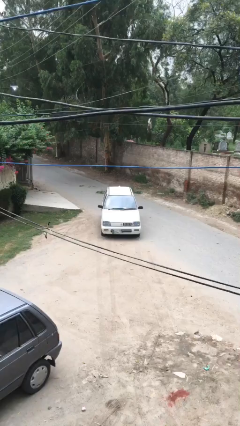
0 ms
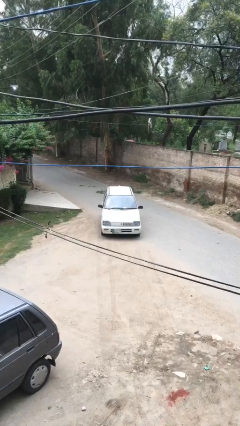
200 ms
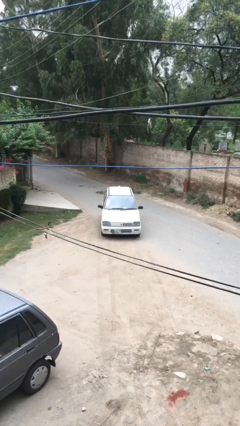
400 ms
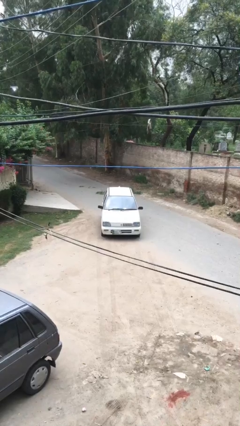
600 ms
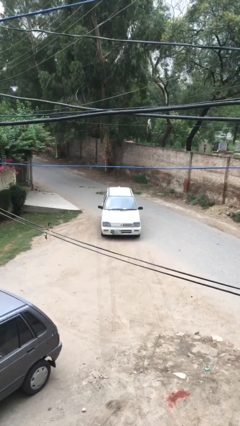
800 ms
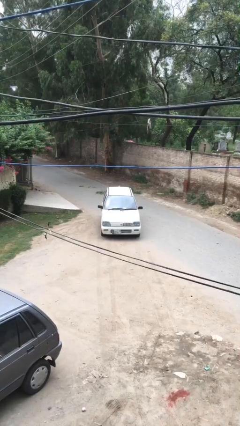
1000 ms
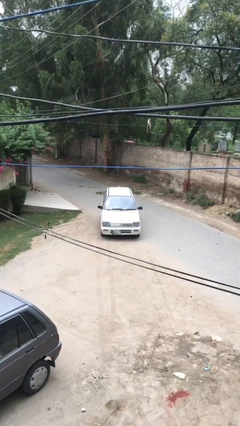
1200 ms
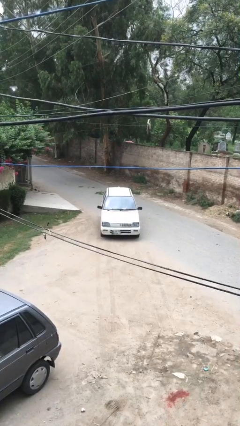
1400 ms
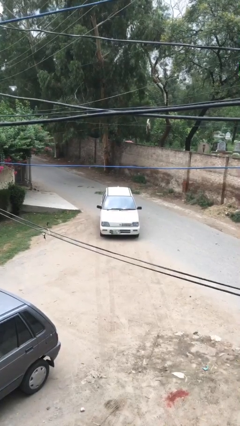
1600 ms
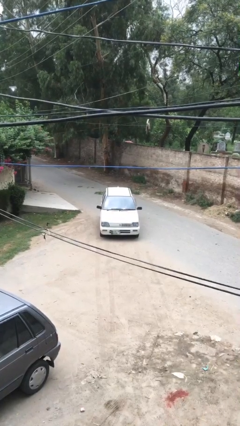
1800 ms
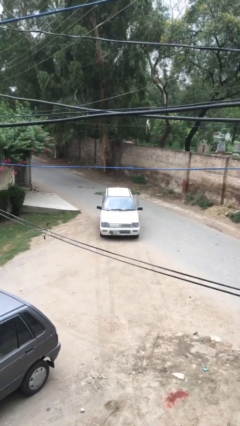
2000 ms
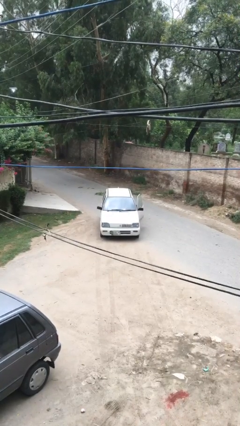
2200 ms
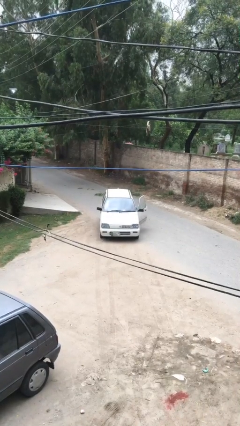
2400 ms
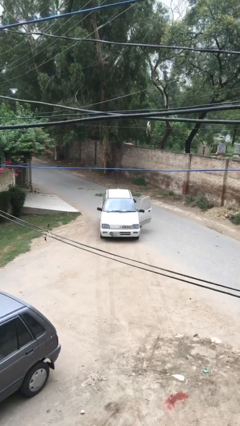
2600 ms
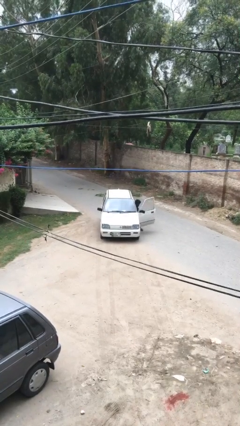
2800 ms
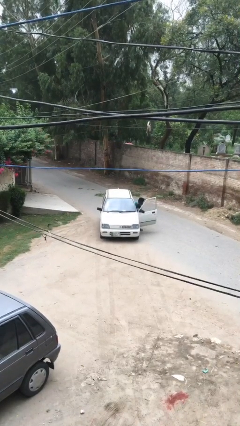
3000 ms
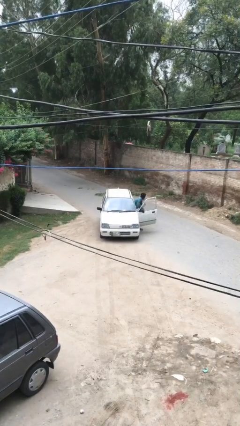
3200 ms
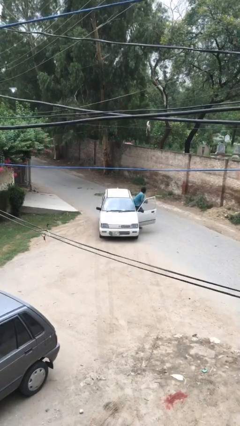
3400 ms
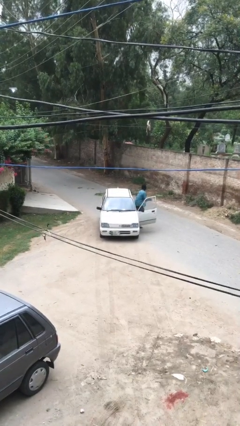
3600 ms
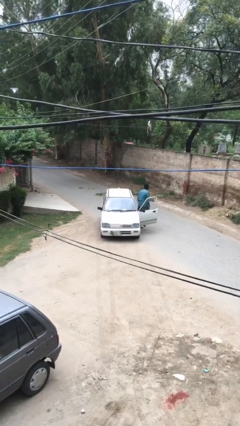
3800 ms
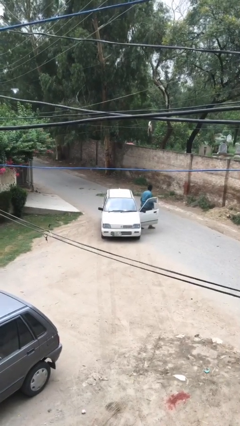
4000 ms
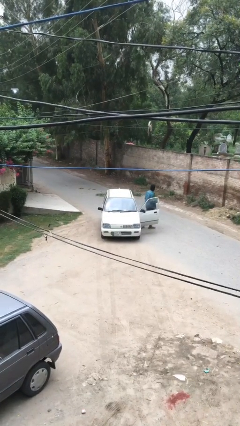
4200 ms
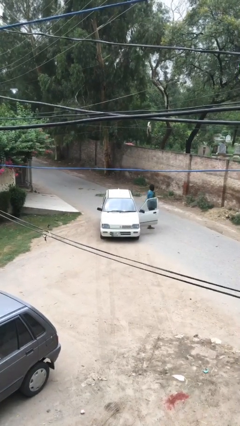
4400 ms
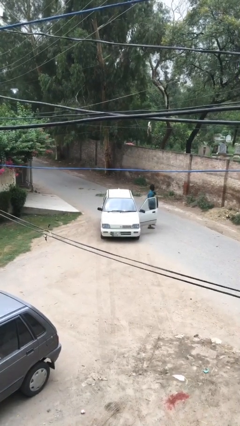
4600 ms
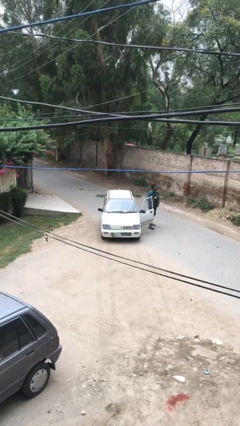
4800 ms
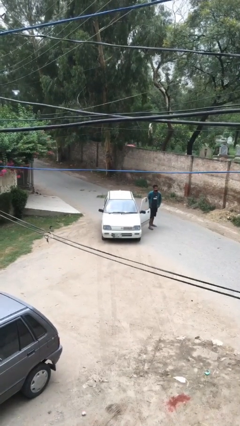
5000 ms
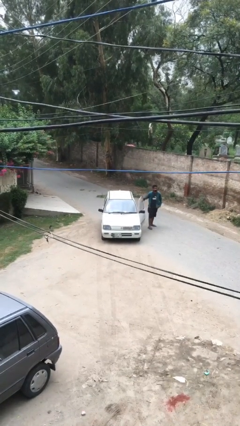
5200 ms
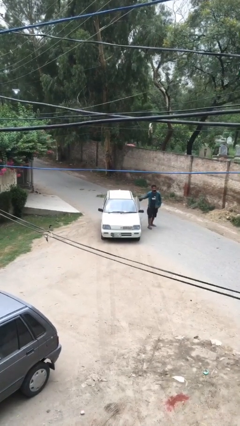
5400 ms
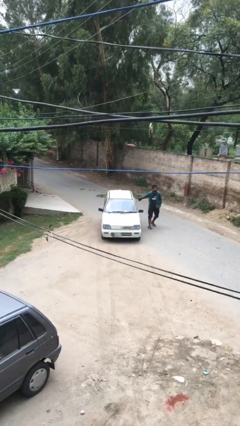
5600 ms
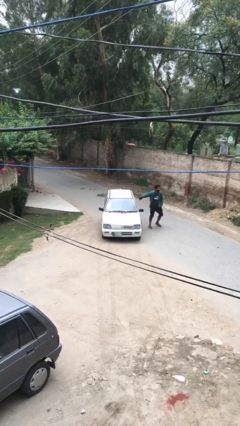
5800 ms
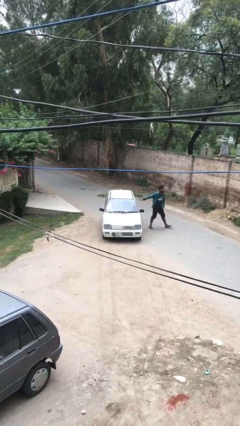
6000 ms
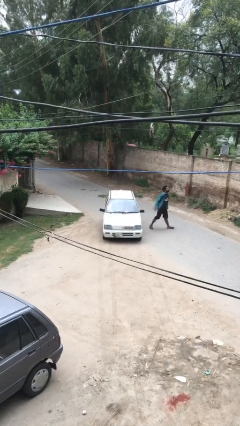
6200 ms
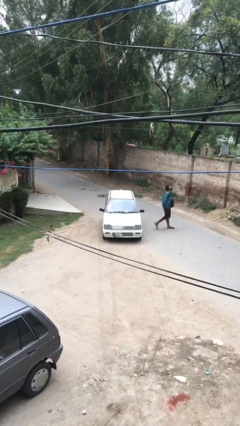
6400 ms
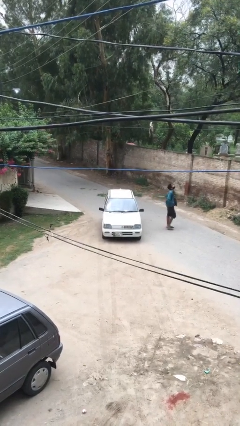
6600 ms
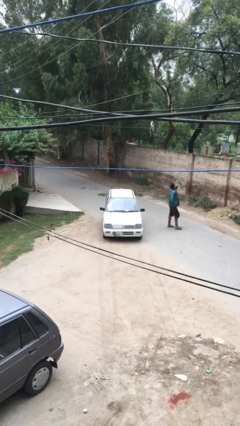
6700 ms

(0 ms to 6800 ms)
car drops off person

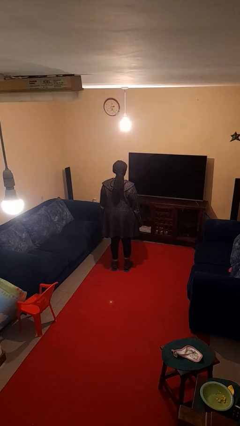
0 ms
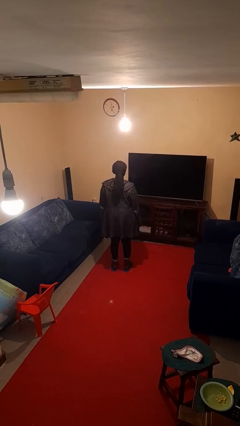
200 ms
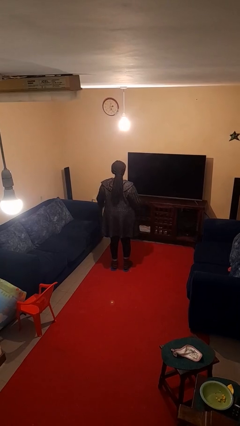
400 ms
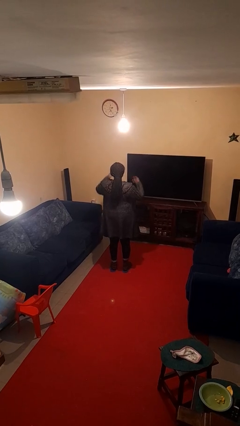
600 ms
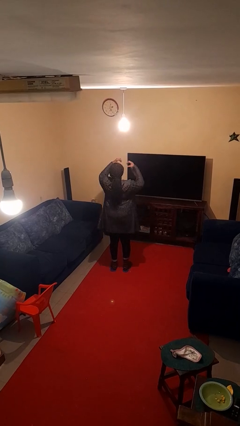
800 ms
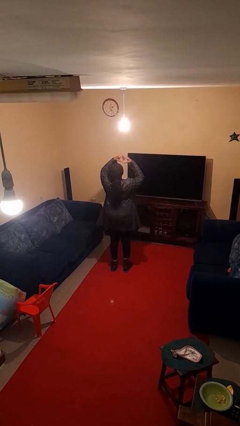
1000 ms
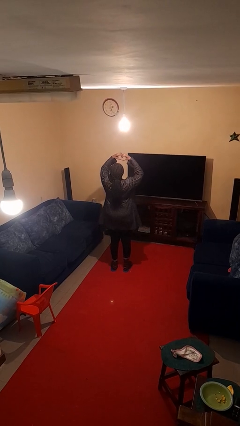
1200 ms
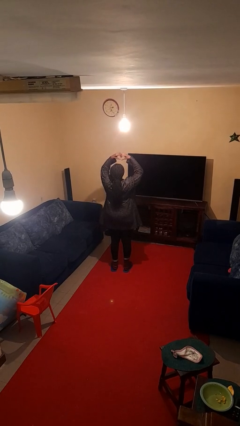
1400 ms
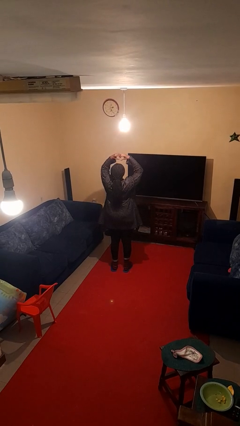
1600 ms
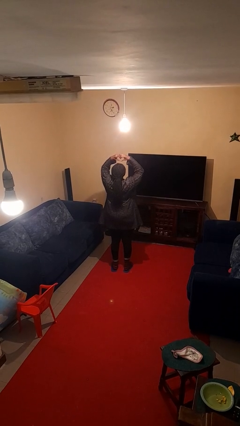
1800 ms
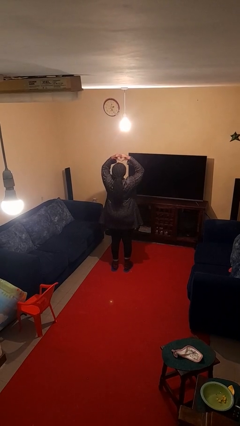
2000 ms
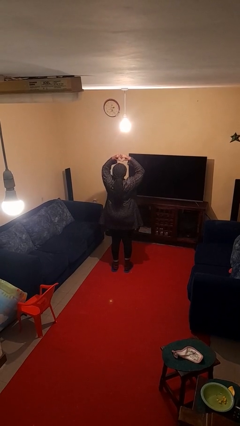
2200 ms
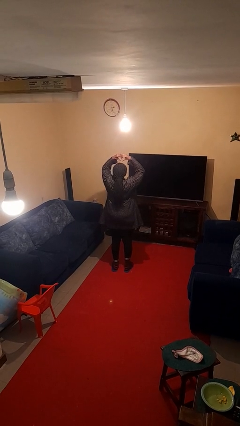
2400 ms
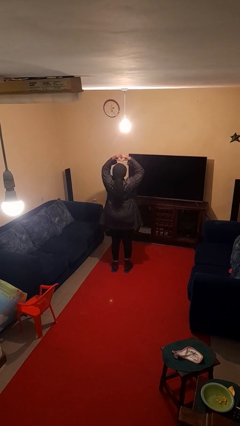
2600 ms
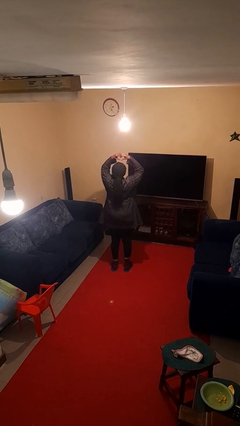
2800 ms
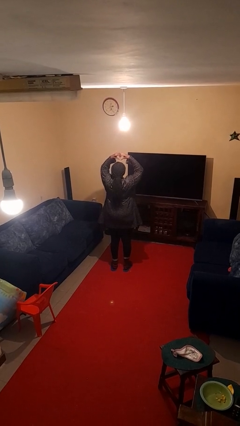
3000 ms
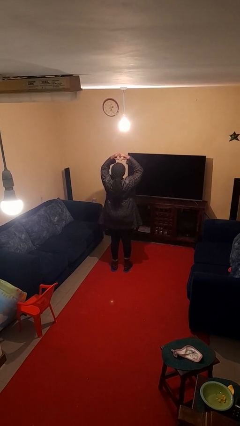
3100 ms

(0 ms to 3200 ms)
person gestures heart

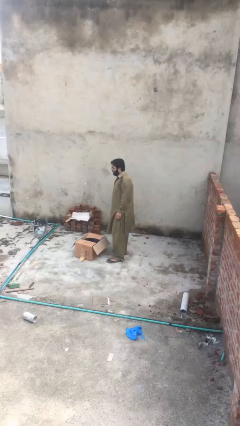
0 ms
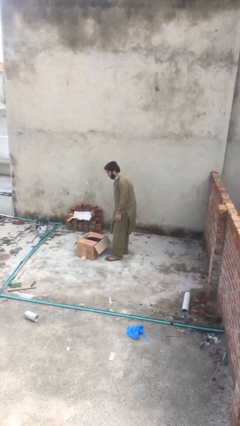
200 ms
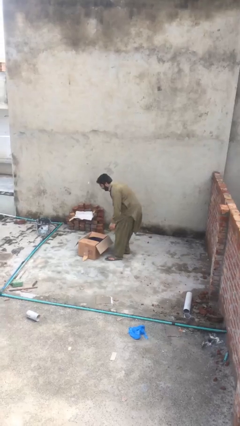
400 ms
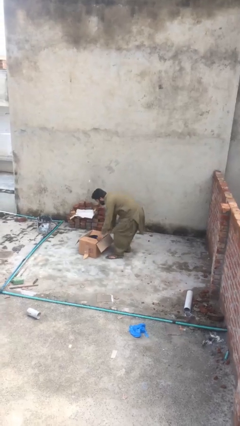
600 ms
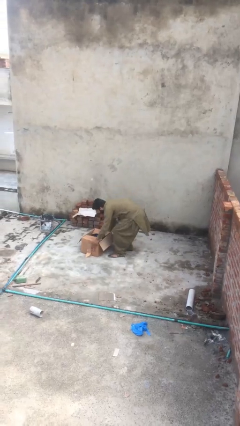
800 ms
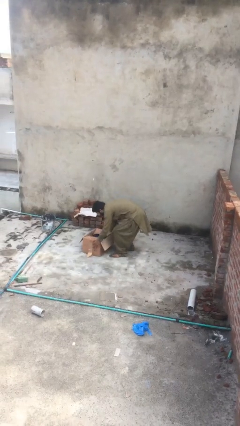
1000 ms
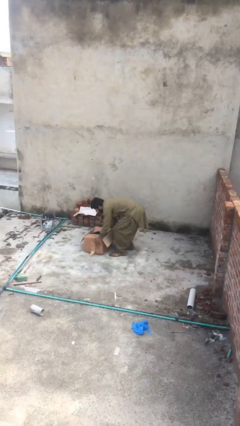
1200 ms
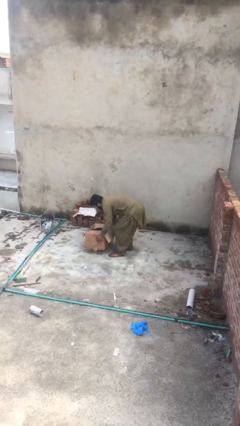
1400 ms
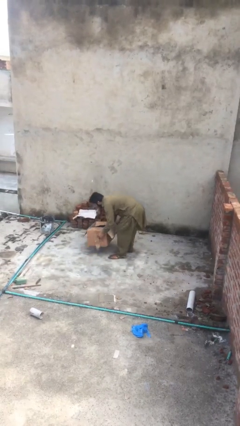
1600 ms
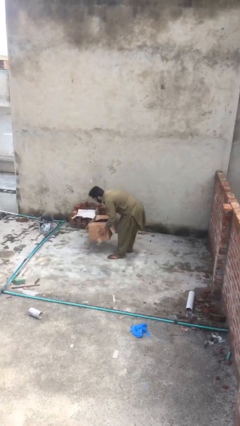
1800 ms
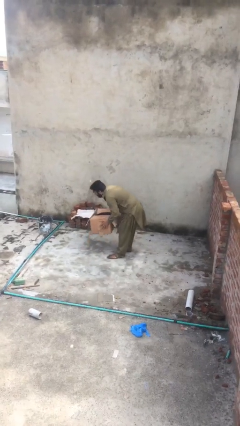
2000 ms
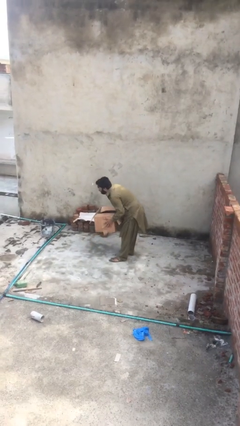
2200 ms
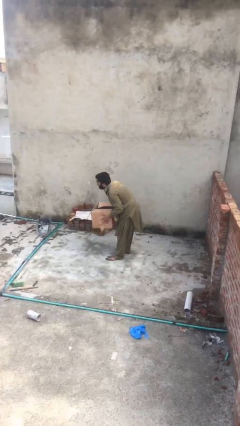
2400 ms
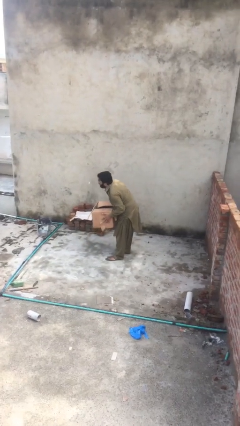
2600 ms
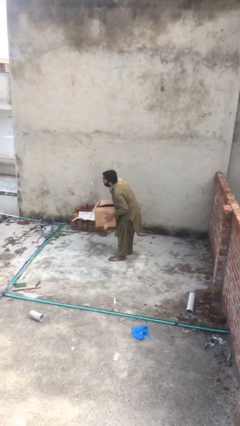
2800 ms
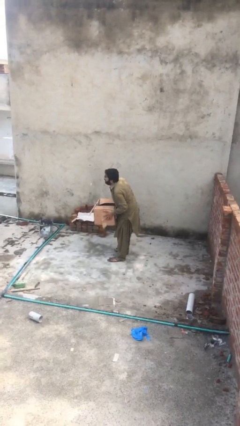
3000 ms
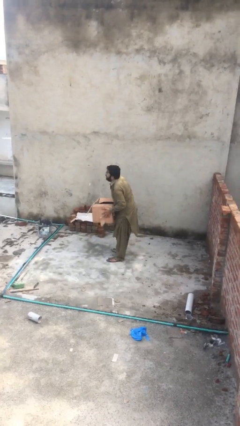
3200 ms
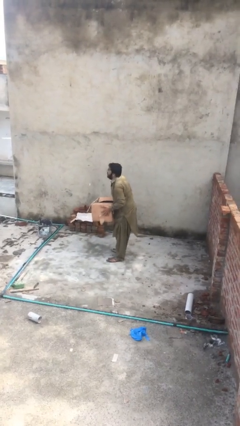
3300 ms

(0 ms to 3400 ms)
person picks up object from floor

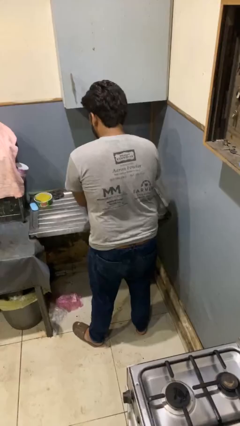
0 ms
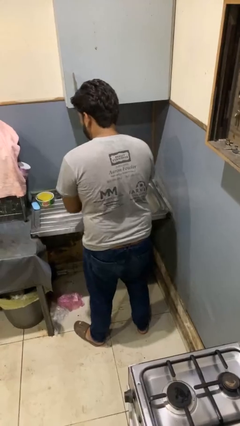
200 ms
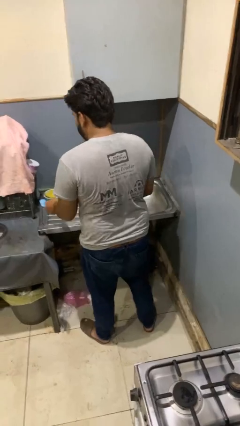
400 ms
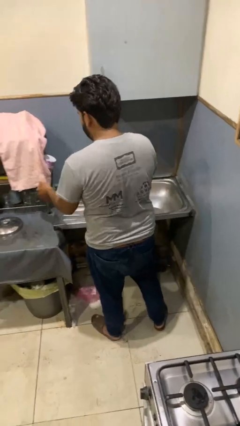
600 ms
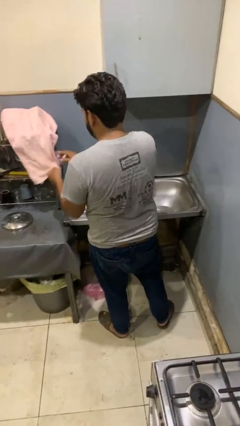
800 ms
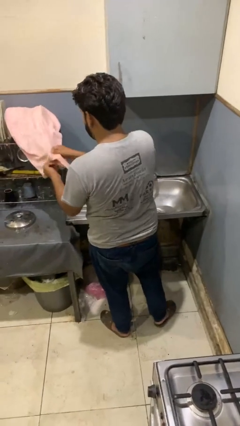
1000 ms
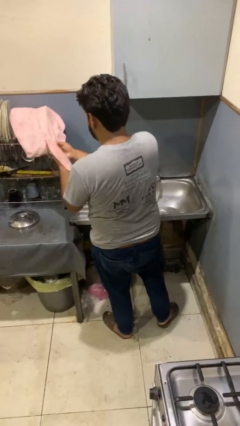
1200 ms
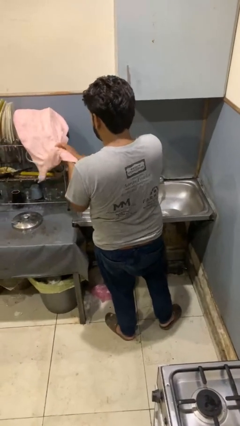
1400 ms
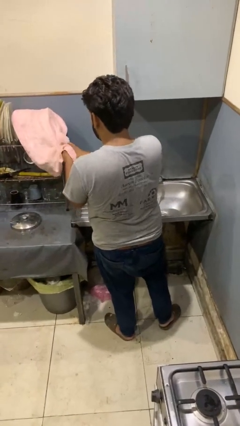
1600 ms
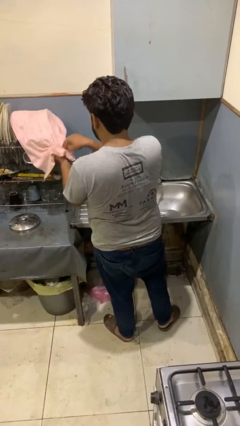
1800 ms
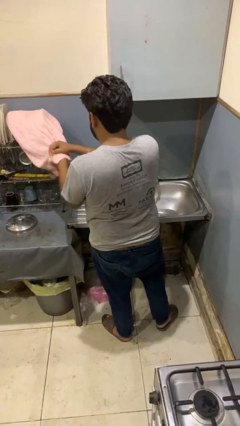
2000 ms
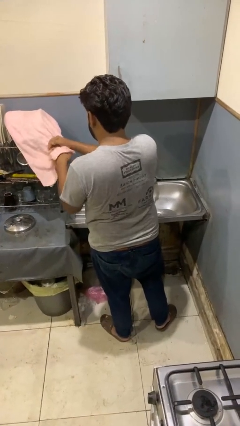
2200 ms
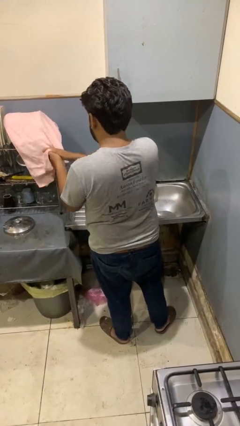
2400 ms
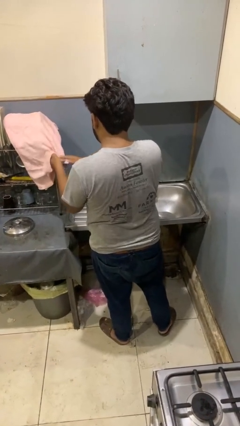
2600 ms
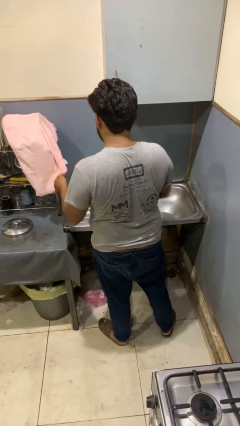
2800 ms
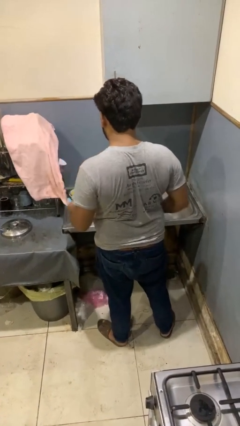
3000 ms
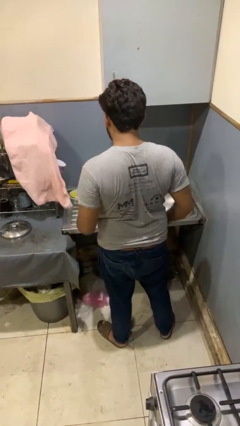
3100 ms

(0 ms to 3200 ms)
person dries hands with towel

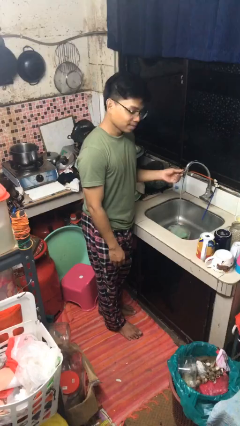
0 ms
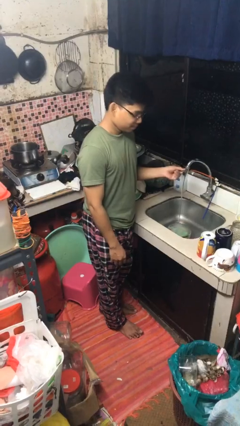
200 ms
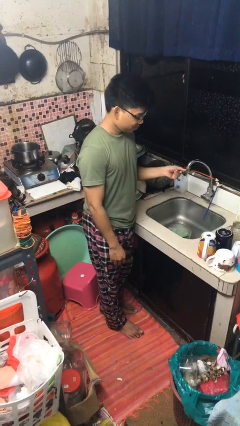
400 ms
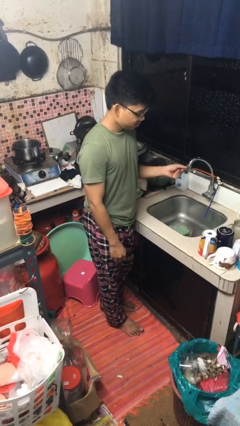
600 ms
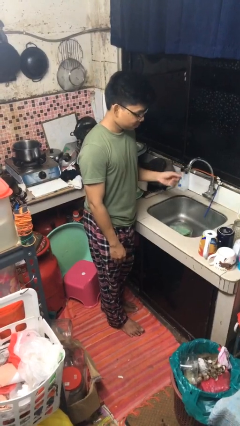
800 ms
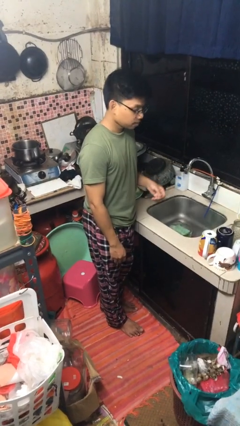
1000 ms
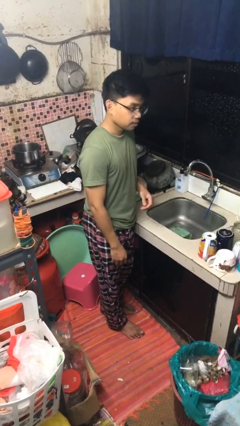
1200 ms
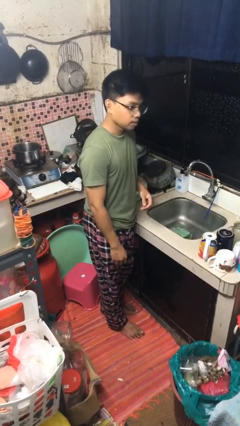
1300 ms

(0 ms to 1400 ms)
person turns off faucet
